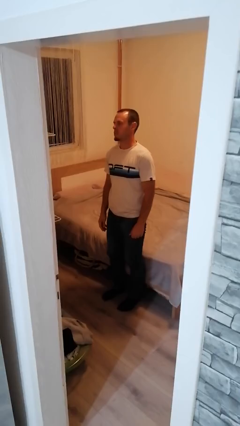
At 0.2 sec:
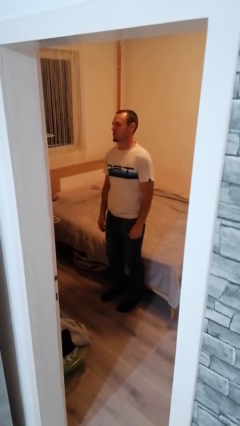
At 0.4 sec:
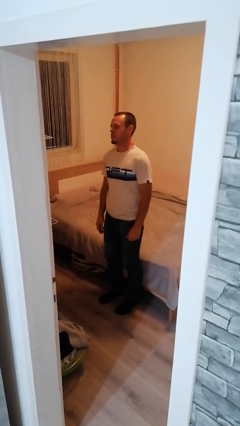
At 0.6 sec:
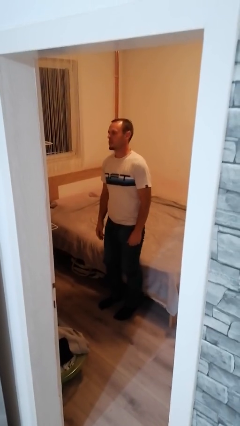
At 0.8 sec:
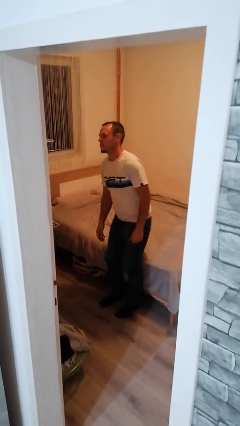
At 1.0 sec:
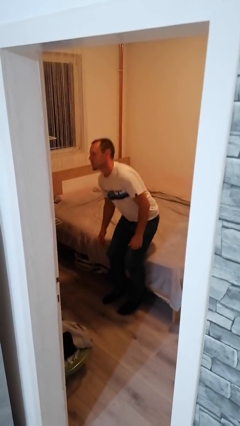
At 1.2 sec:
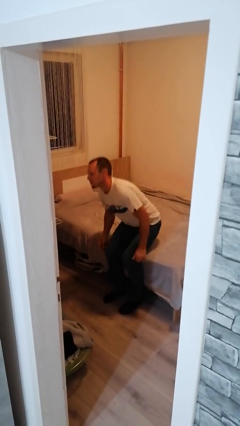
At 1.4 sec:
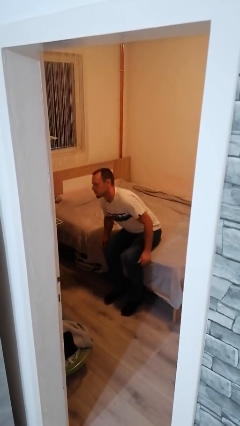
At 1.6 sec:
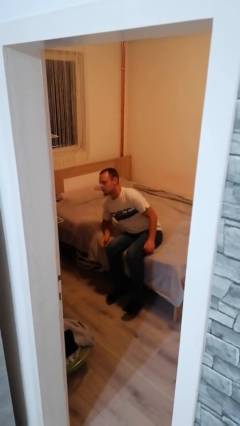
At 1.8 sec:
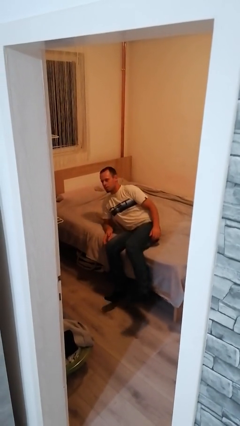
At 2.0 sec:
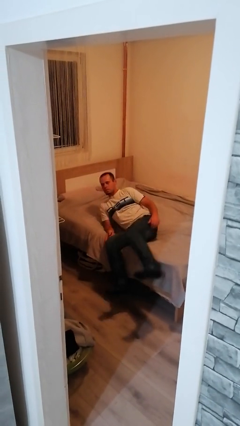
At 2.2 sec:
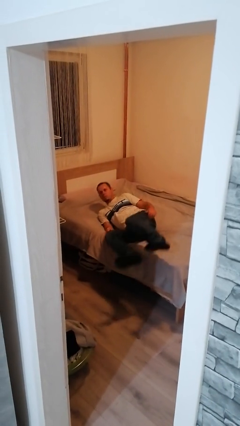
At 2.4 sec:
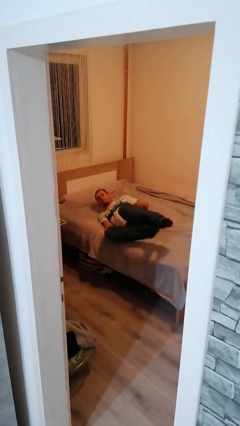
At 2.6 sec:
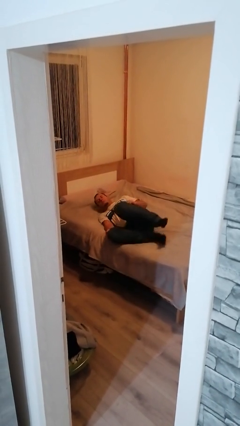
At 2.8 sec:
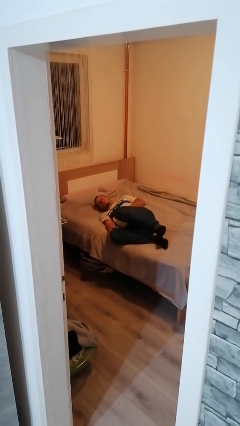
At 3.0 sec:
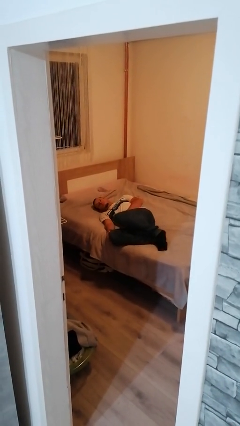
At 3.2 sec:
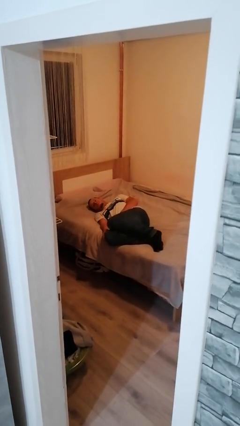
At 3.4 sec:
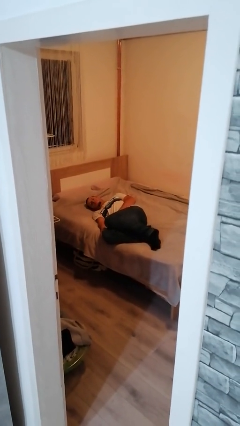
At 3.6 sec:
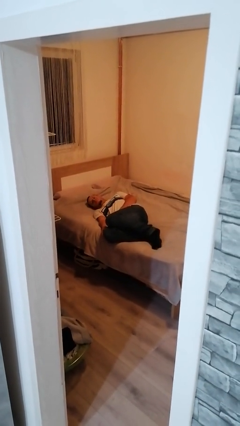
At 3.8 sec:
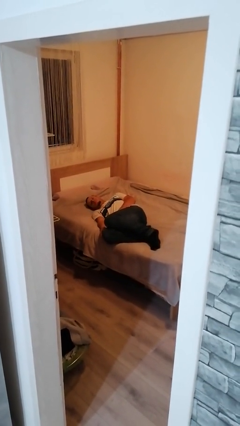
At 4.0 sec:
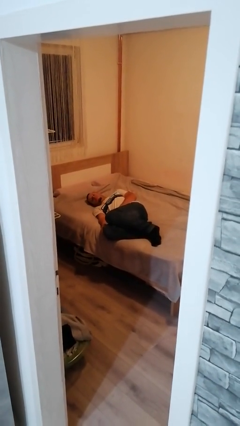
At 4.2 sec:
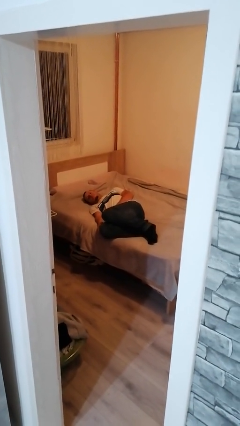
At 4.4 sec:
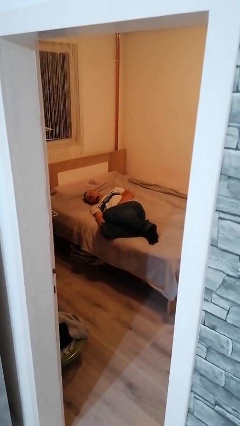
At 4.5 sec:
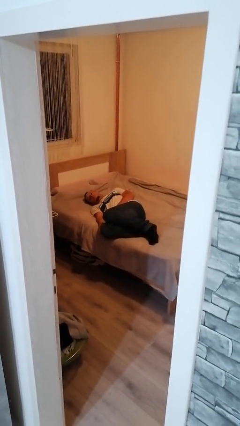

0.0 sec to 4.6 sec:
person lies down on bed

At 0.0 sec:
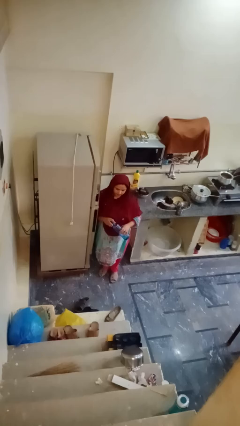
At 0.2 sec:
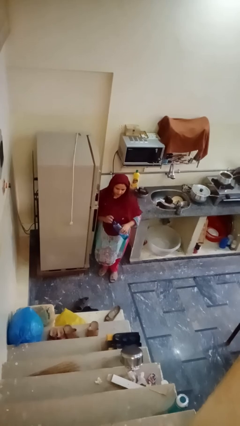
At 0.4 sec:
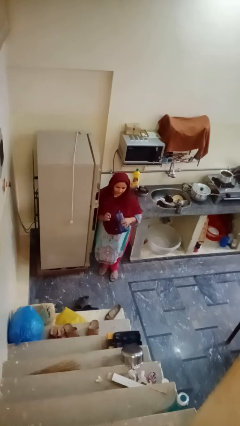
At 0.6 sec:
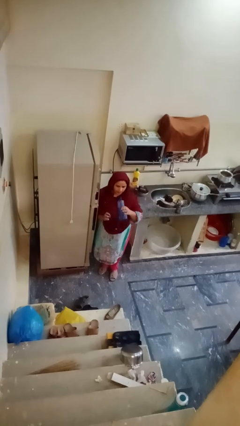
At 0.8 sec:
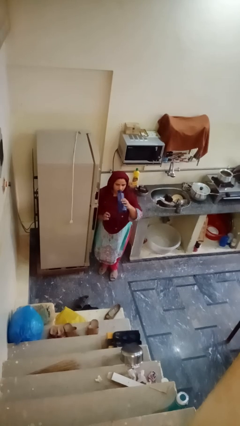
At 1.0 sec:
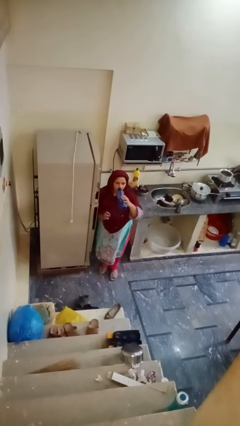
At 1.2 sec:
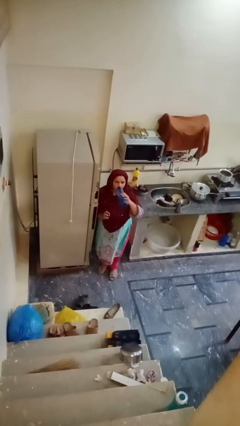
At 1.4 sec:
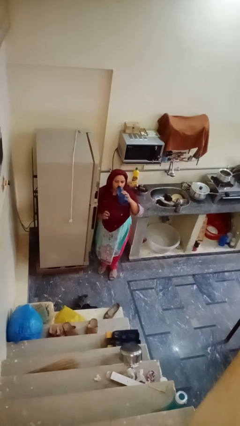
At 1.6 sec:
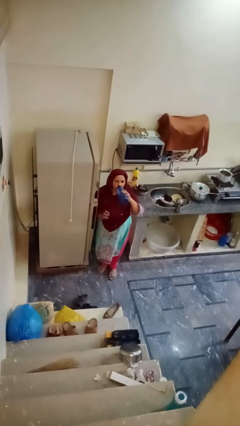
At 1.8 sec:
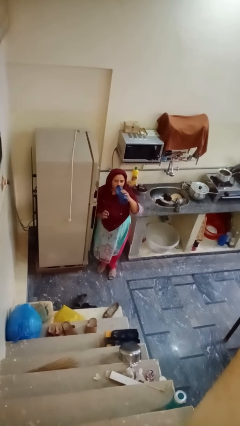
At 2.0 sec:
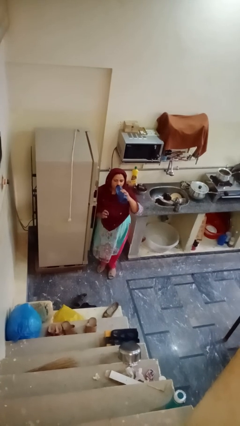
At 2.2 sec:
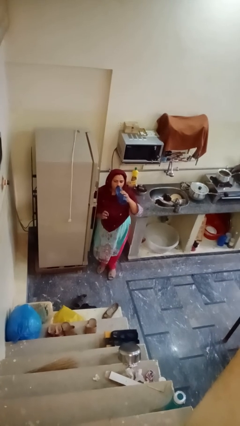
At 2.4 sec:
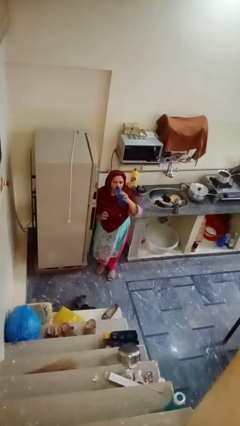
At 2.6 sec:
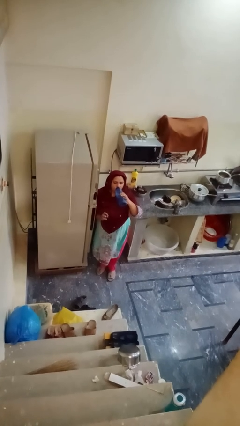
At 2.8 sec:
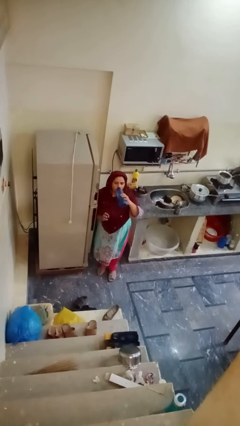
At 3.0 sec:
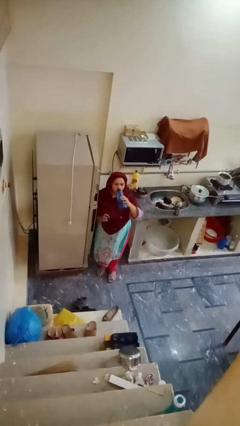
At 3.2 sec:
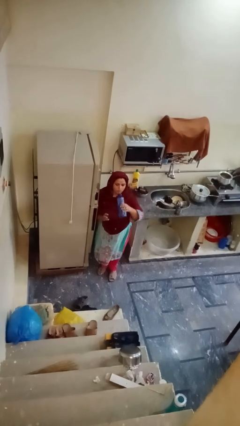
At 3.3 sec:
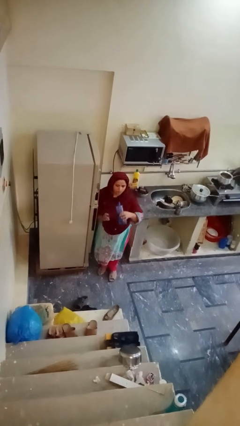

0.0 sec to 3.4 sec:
person drinks from bottle

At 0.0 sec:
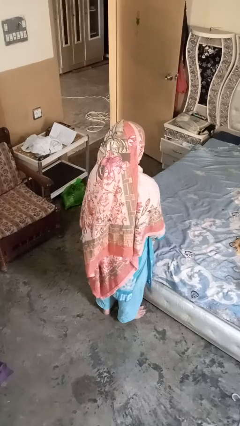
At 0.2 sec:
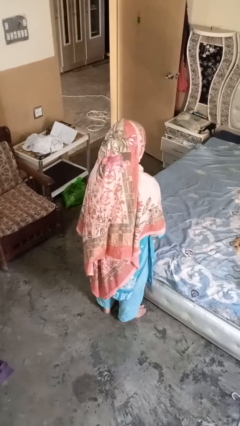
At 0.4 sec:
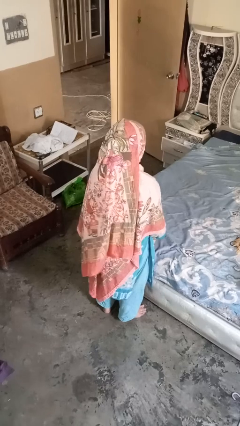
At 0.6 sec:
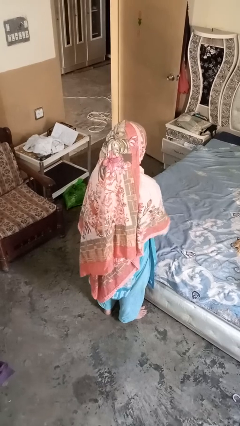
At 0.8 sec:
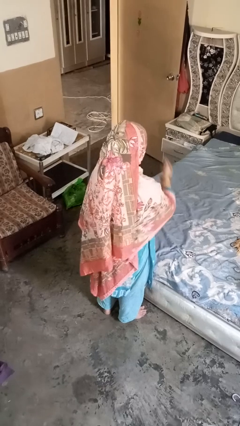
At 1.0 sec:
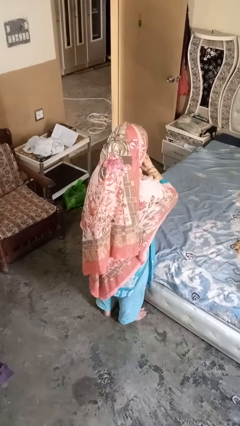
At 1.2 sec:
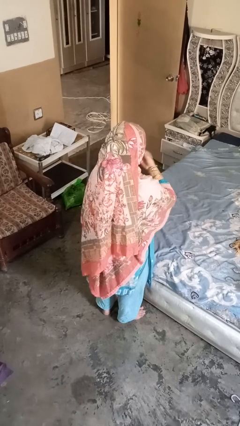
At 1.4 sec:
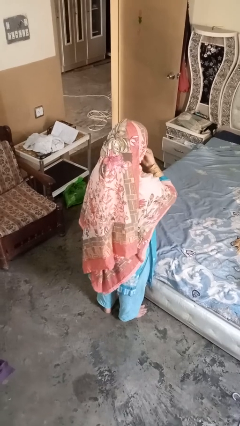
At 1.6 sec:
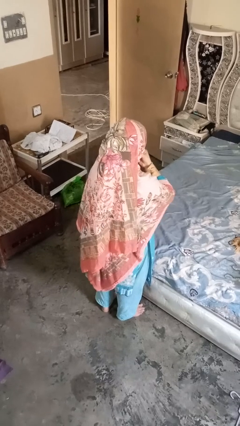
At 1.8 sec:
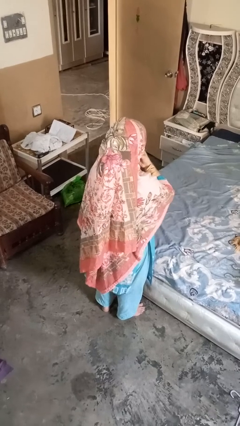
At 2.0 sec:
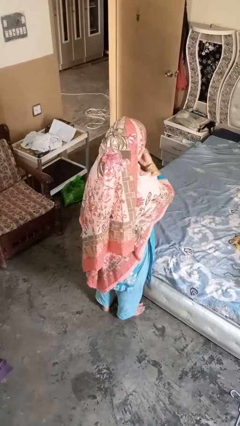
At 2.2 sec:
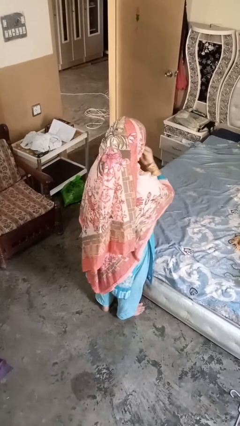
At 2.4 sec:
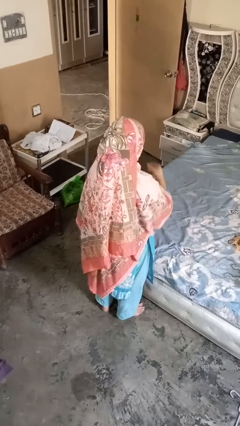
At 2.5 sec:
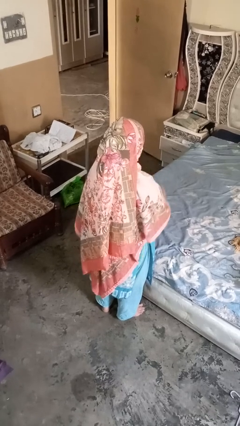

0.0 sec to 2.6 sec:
person strokes chin

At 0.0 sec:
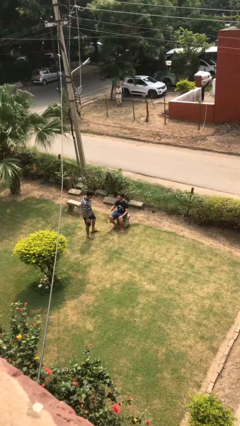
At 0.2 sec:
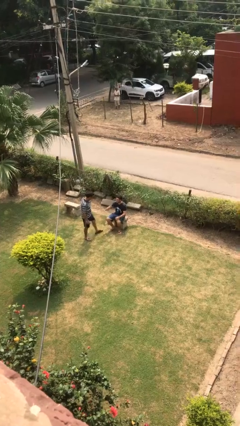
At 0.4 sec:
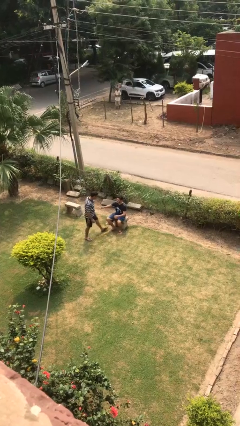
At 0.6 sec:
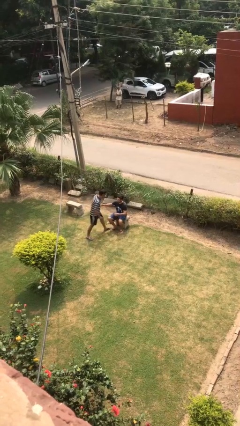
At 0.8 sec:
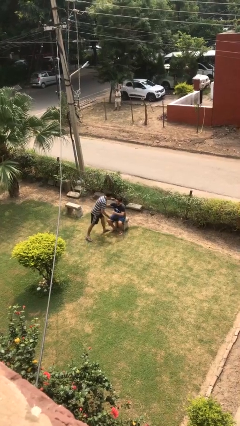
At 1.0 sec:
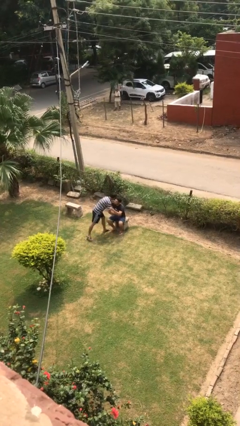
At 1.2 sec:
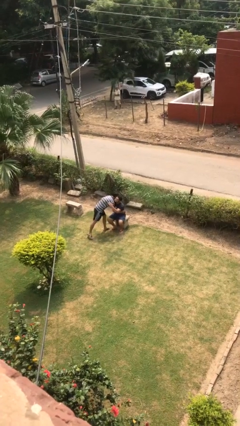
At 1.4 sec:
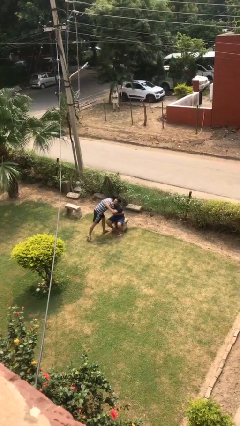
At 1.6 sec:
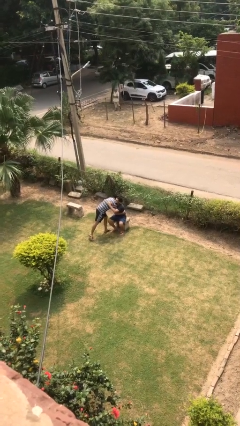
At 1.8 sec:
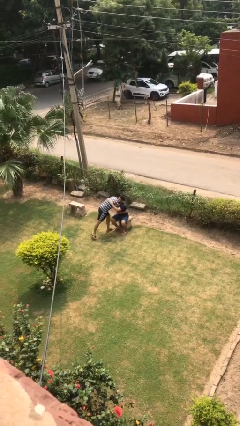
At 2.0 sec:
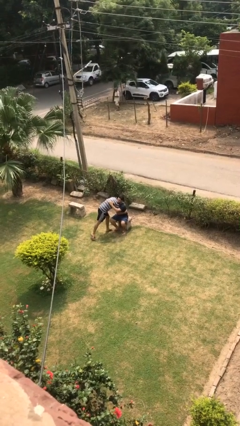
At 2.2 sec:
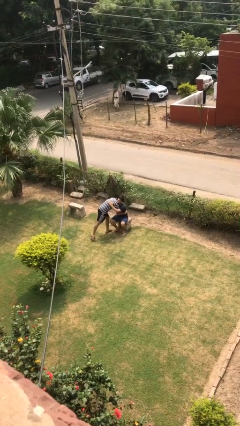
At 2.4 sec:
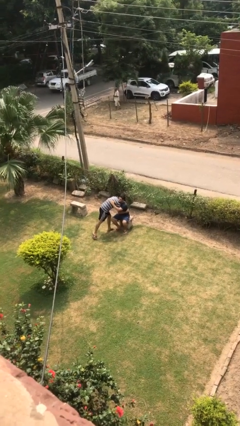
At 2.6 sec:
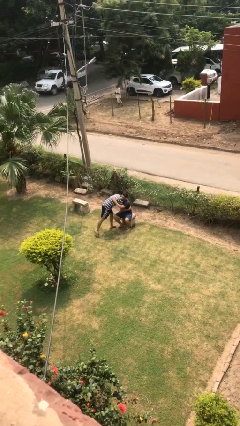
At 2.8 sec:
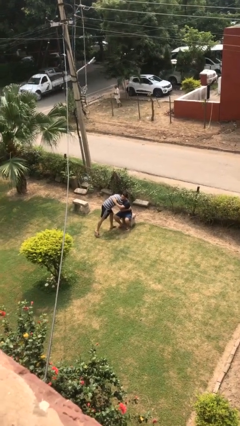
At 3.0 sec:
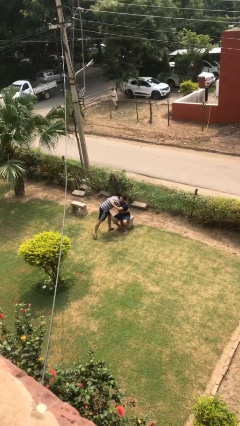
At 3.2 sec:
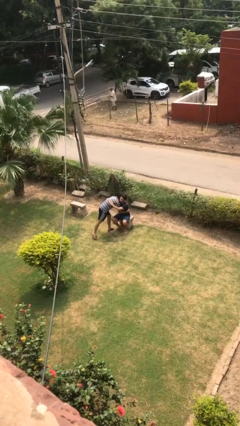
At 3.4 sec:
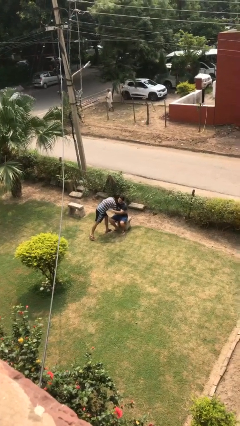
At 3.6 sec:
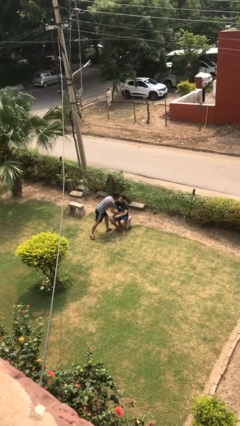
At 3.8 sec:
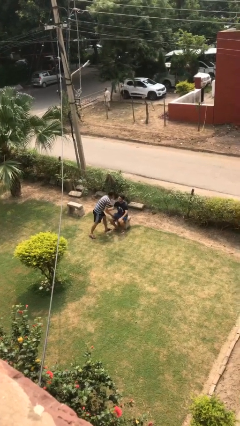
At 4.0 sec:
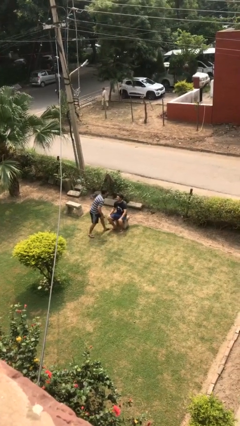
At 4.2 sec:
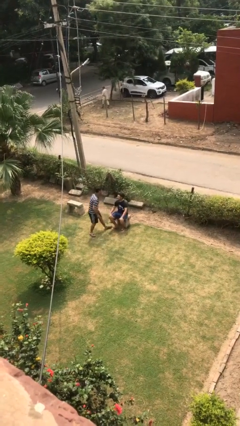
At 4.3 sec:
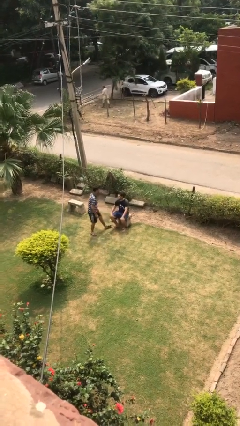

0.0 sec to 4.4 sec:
person embraces person

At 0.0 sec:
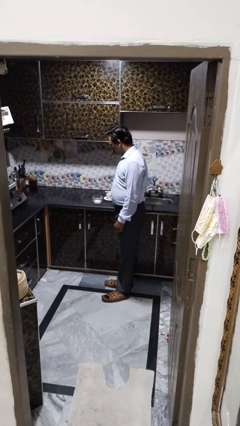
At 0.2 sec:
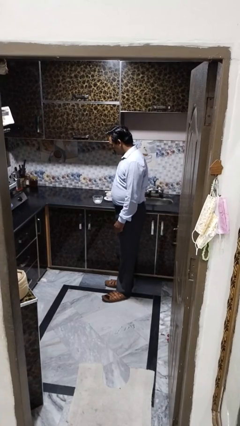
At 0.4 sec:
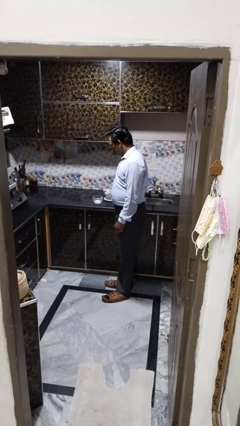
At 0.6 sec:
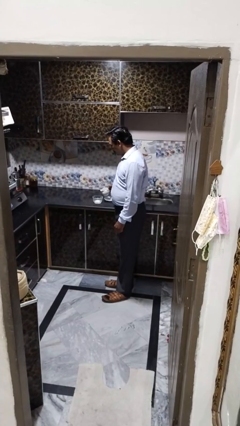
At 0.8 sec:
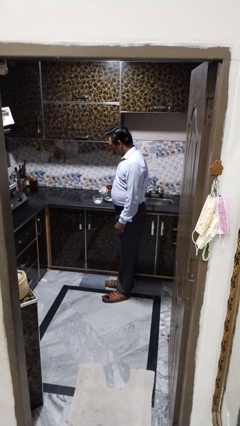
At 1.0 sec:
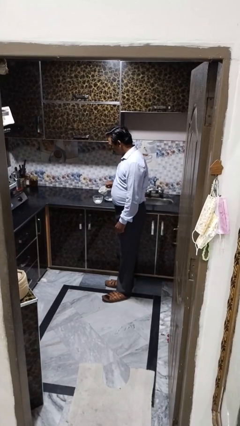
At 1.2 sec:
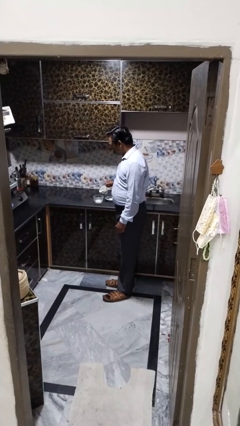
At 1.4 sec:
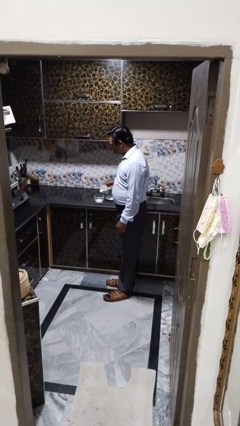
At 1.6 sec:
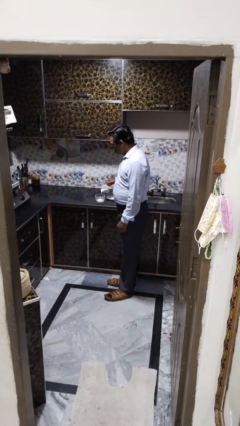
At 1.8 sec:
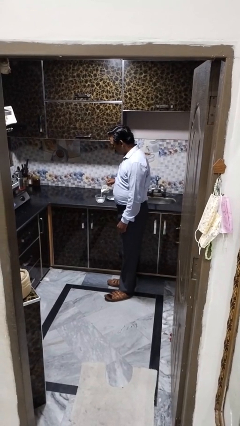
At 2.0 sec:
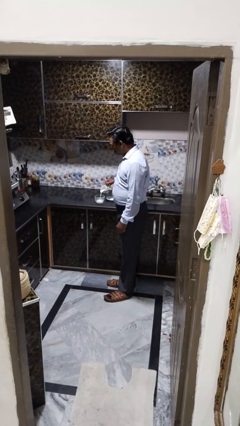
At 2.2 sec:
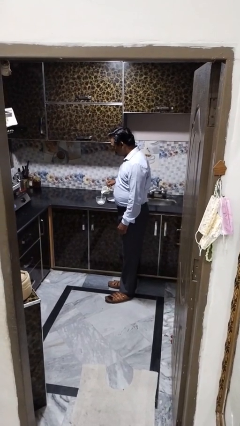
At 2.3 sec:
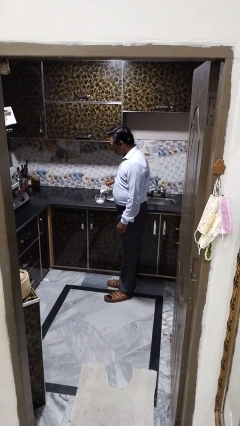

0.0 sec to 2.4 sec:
person pours into bowl
